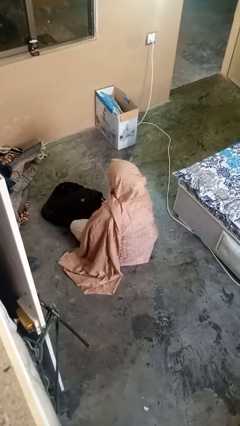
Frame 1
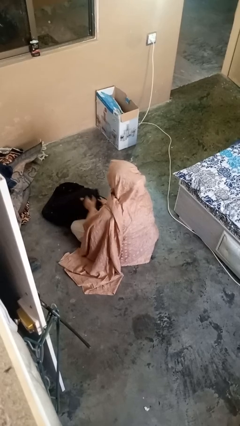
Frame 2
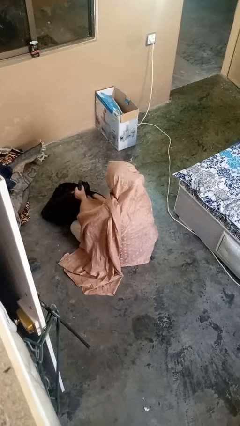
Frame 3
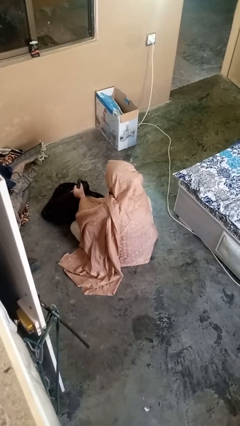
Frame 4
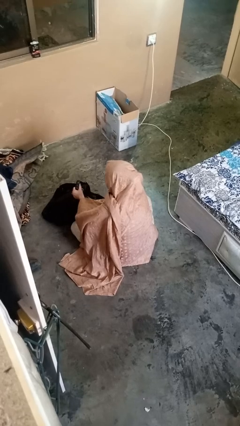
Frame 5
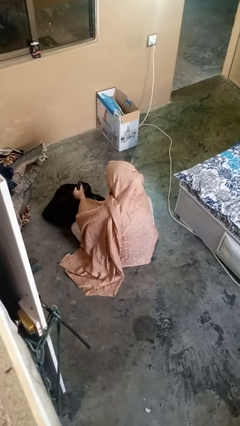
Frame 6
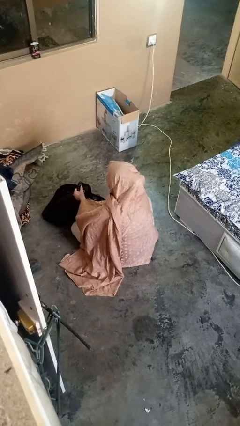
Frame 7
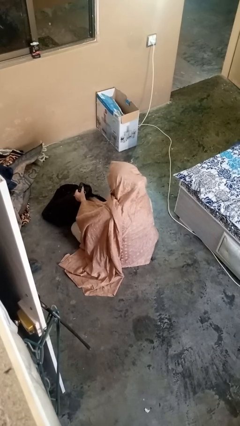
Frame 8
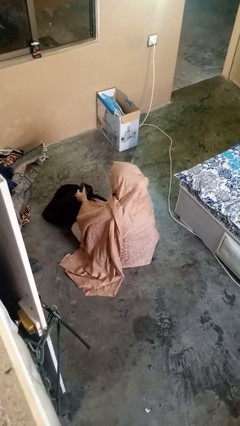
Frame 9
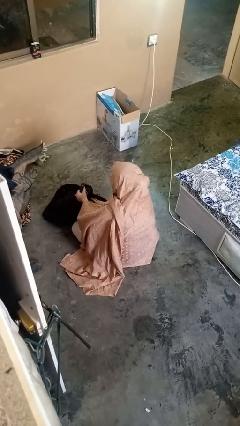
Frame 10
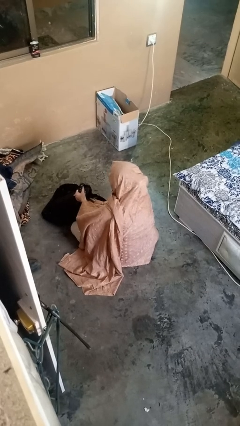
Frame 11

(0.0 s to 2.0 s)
person searches in backpack

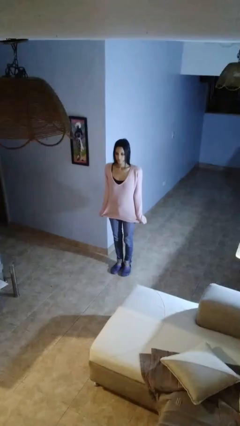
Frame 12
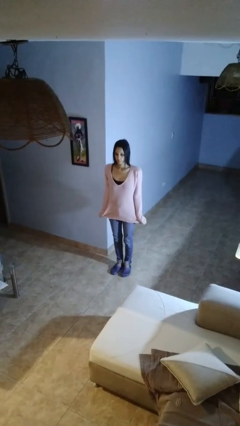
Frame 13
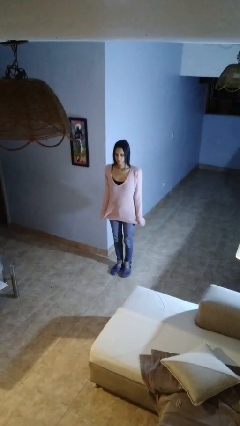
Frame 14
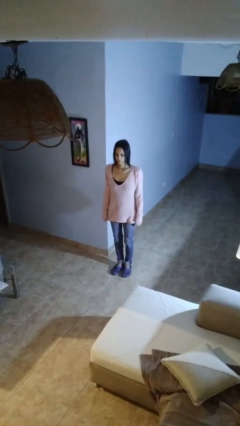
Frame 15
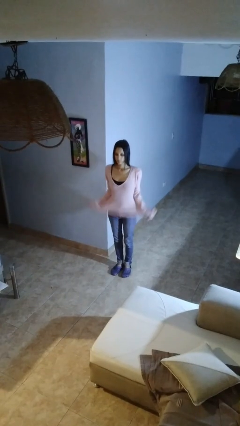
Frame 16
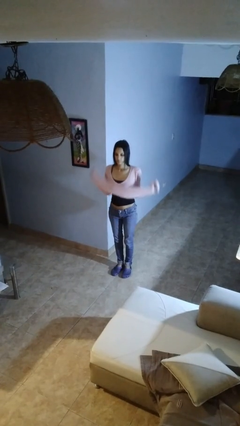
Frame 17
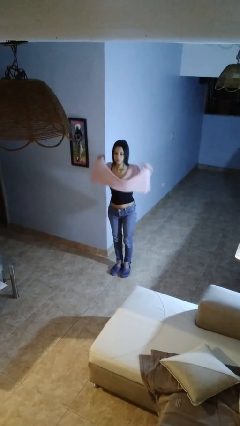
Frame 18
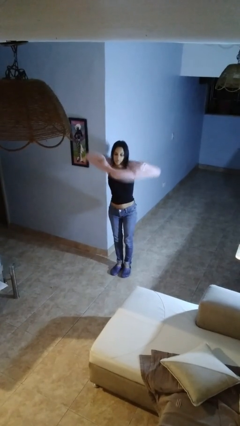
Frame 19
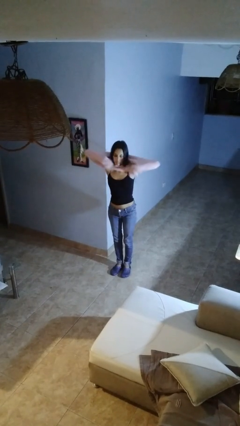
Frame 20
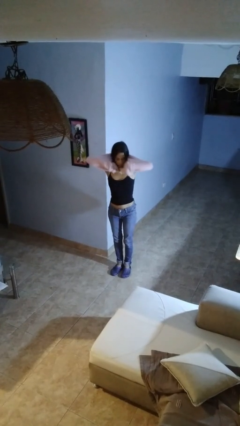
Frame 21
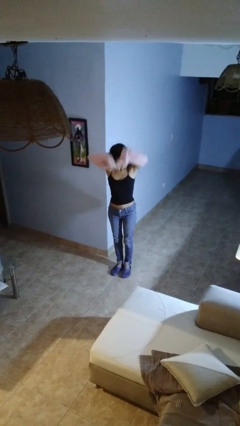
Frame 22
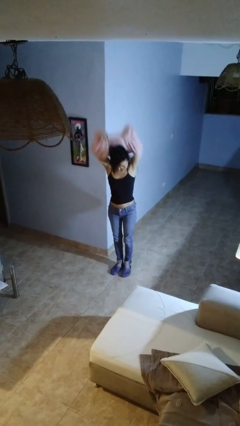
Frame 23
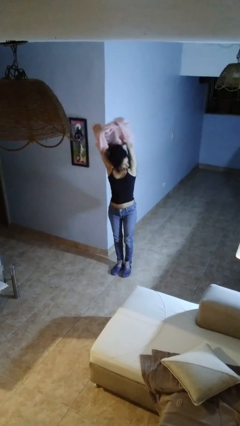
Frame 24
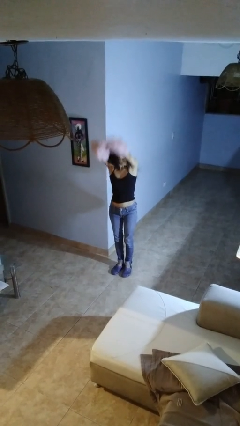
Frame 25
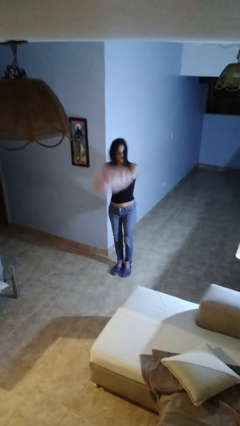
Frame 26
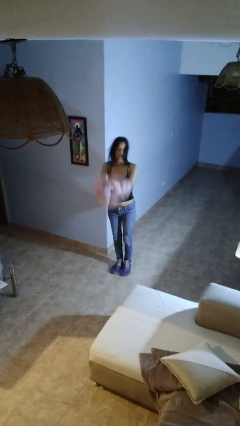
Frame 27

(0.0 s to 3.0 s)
person takes off shirt

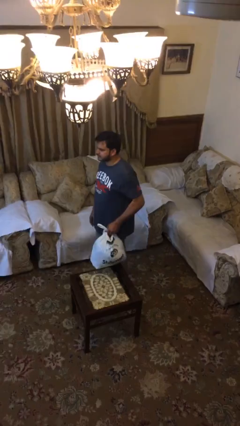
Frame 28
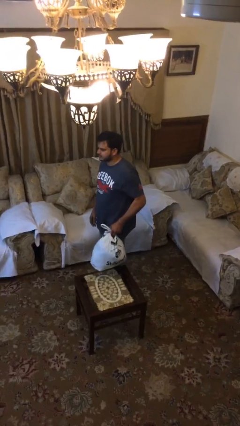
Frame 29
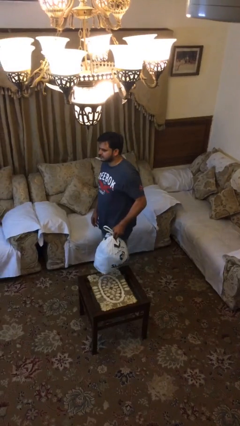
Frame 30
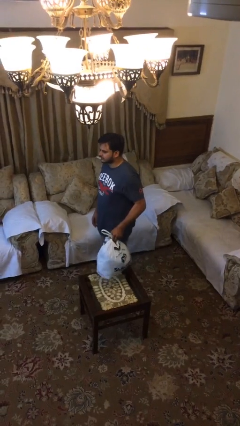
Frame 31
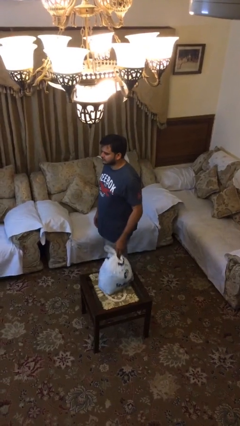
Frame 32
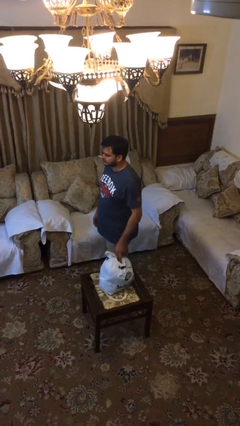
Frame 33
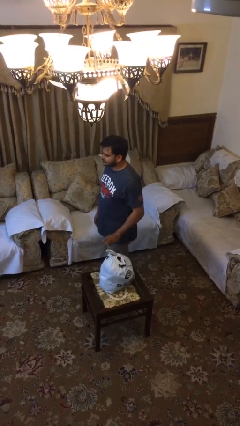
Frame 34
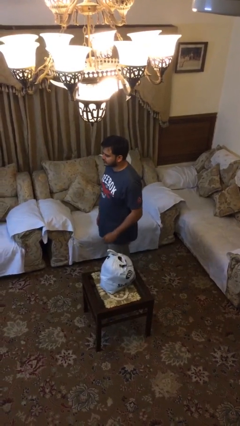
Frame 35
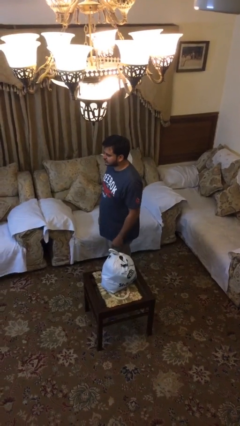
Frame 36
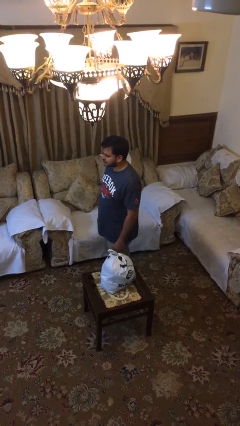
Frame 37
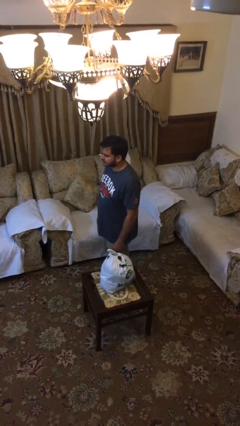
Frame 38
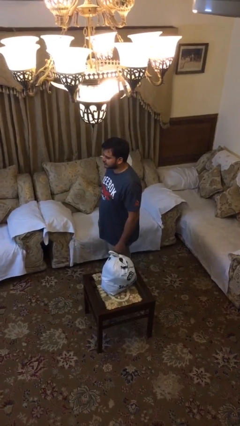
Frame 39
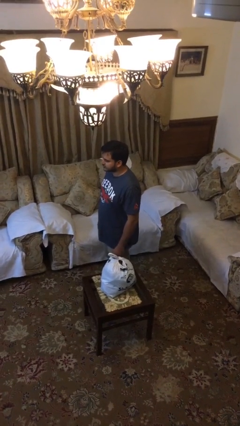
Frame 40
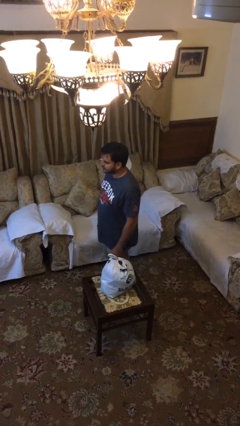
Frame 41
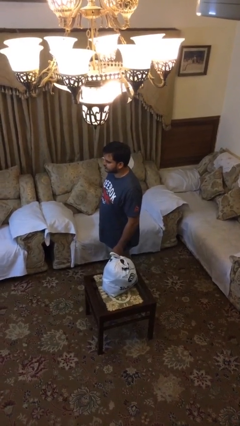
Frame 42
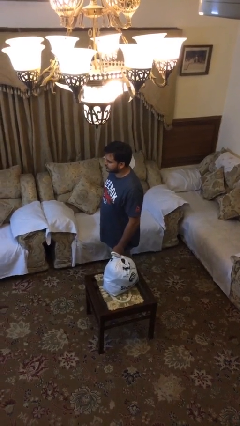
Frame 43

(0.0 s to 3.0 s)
person puts down object on table

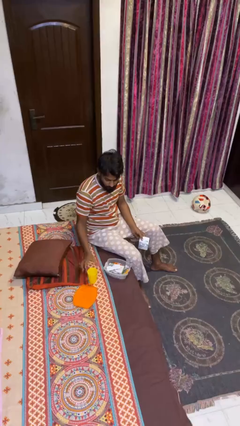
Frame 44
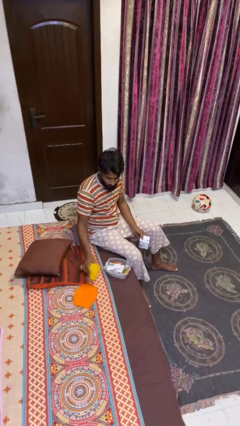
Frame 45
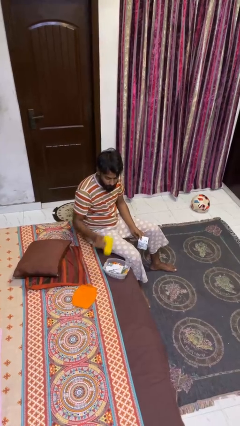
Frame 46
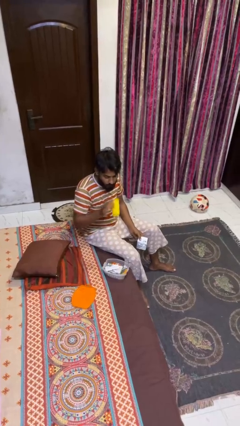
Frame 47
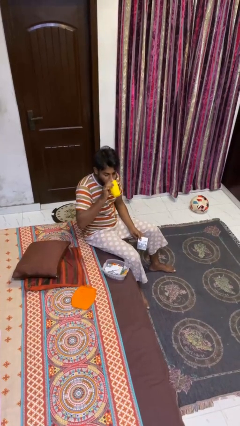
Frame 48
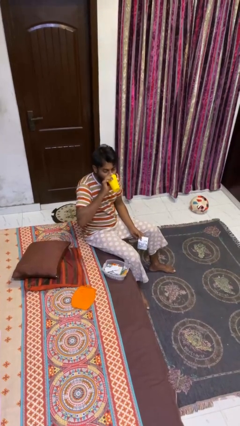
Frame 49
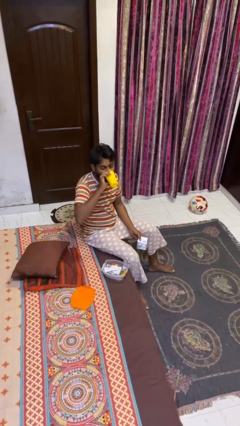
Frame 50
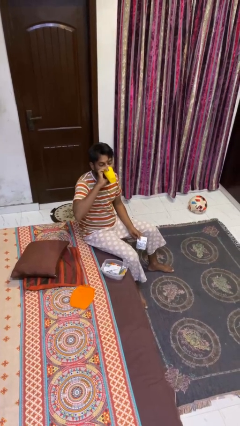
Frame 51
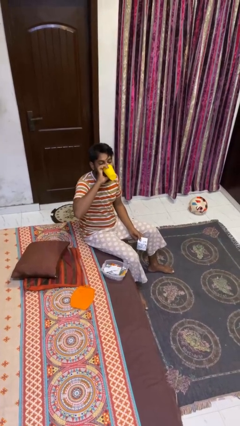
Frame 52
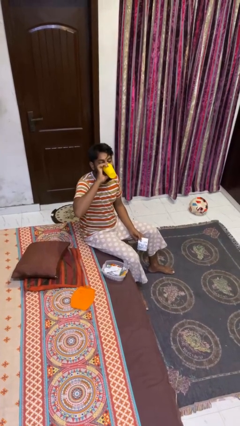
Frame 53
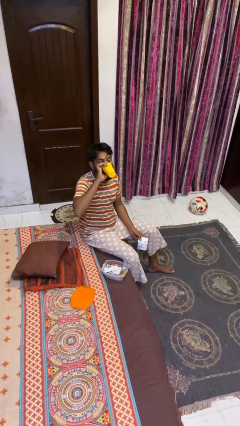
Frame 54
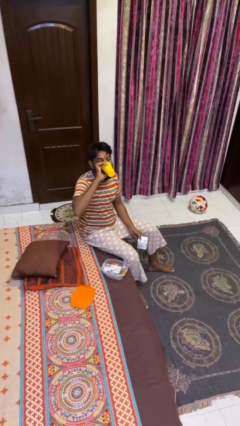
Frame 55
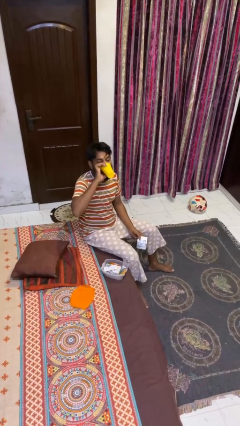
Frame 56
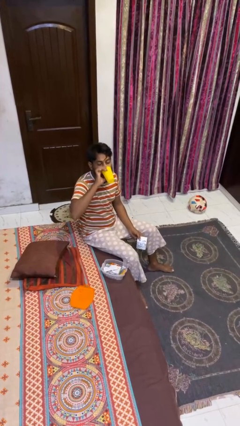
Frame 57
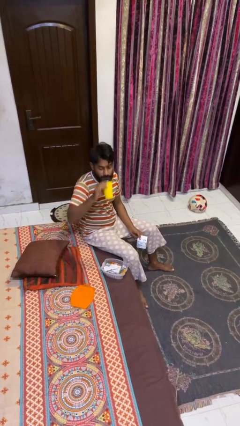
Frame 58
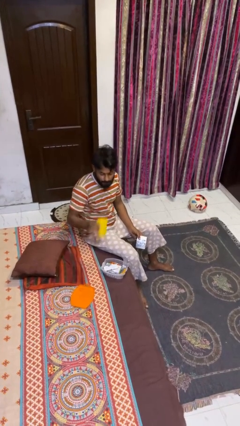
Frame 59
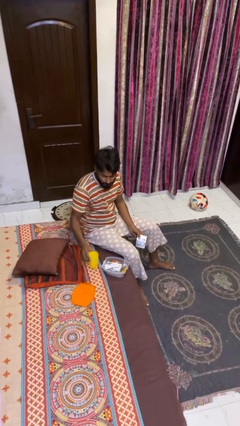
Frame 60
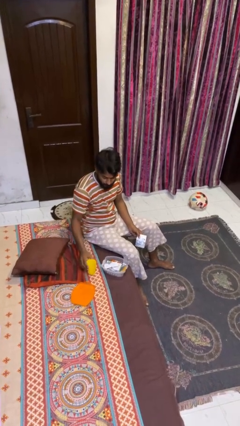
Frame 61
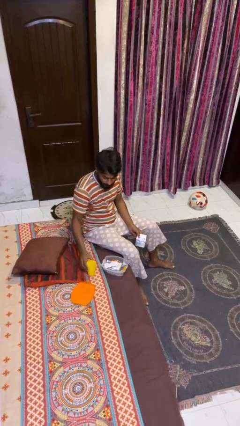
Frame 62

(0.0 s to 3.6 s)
person drinks from cup

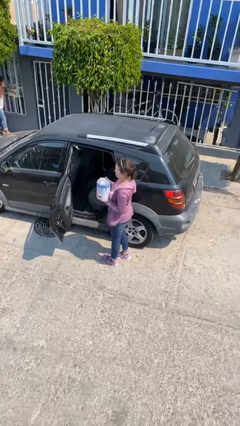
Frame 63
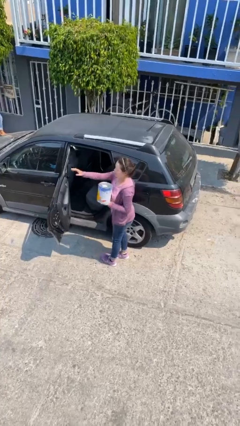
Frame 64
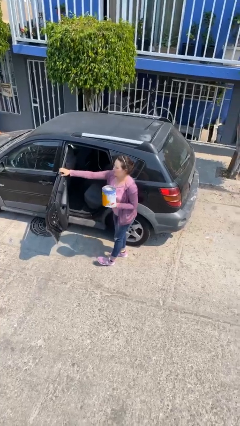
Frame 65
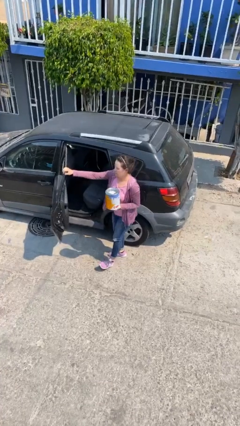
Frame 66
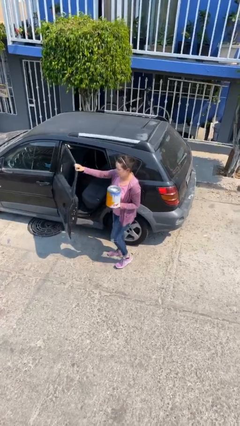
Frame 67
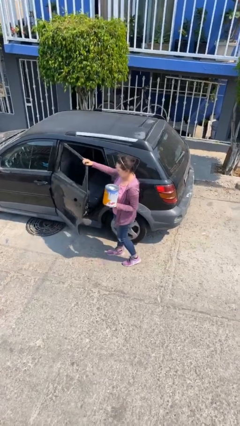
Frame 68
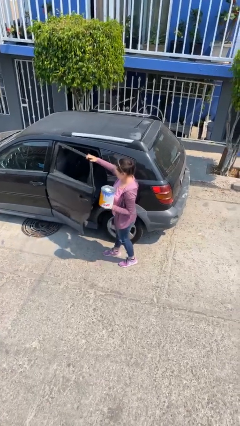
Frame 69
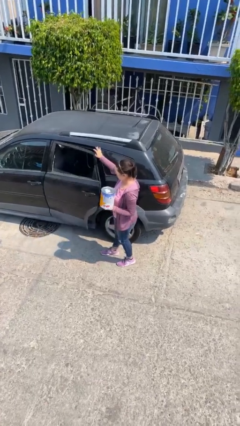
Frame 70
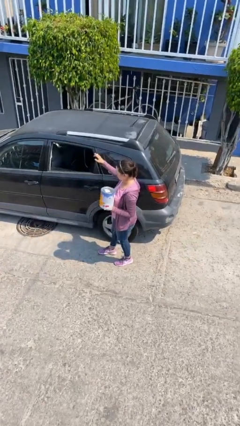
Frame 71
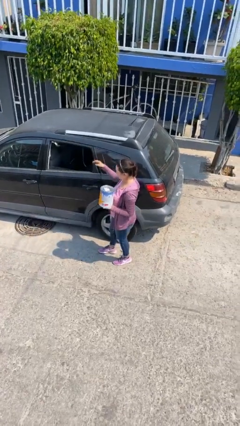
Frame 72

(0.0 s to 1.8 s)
person closes car door

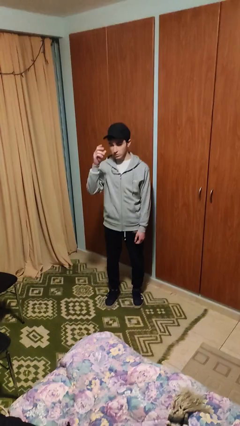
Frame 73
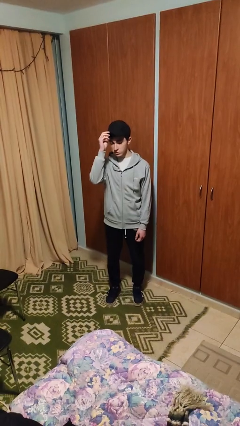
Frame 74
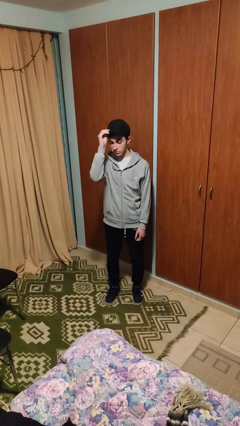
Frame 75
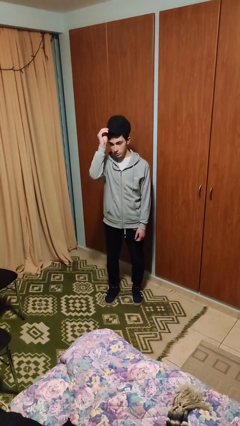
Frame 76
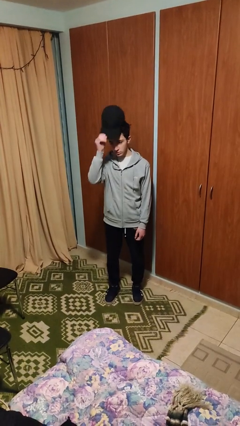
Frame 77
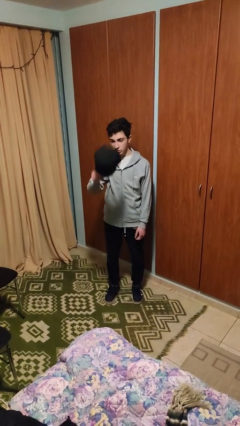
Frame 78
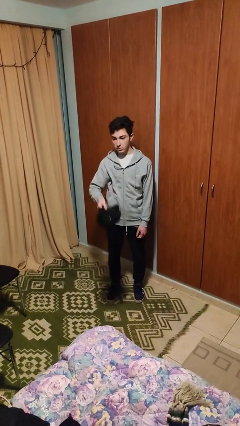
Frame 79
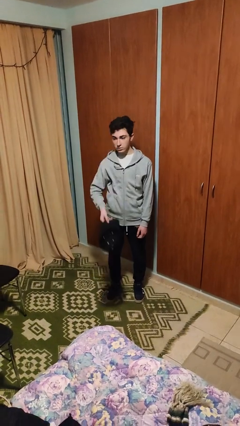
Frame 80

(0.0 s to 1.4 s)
person takes off hat

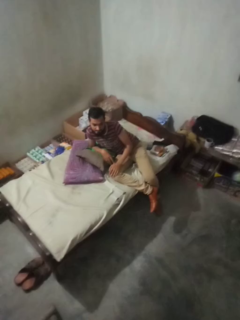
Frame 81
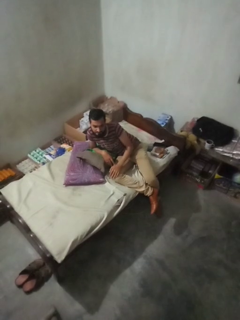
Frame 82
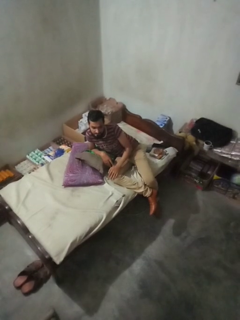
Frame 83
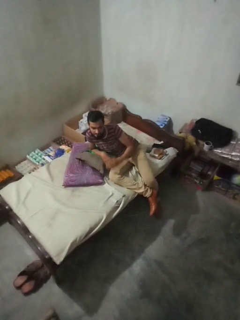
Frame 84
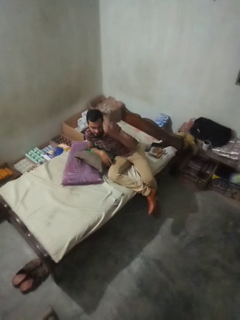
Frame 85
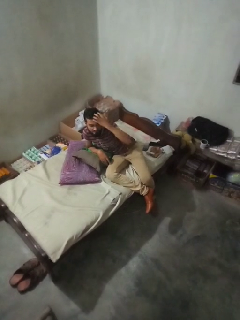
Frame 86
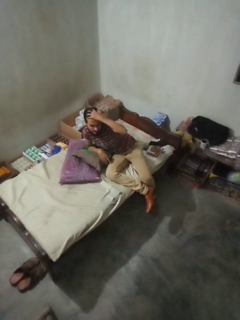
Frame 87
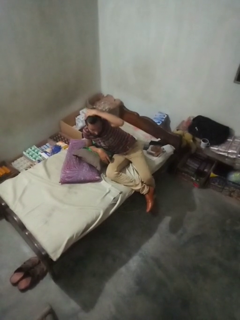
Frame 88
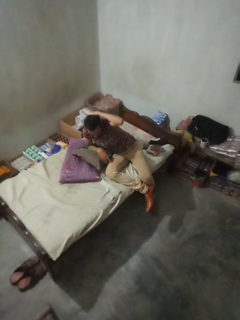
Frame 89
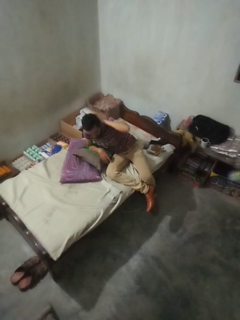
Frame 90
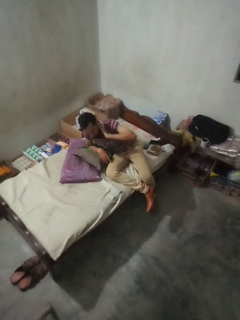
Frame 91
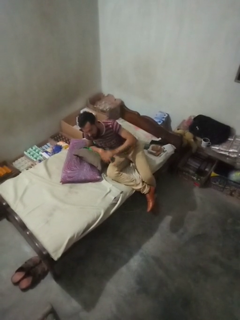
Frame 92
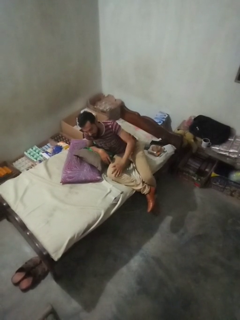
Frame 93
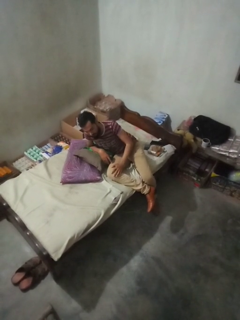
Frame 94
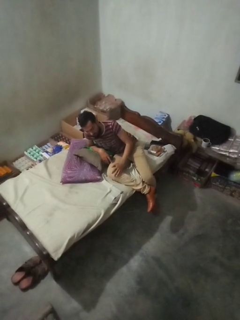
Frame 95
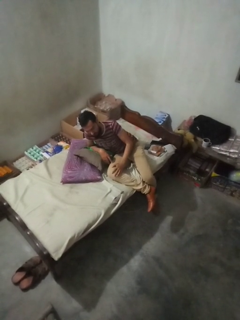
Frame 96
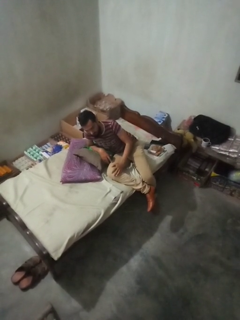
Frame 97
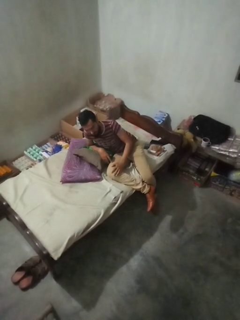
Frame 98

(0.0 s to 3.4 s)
person strokes hair

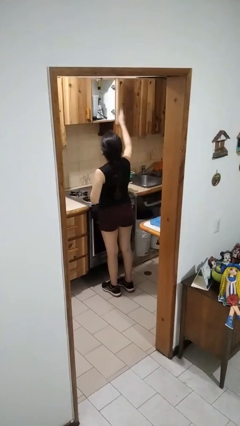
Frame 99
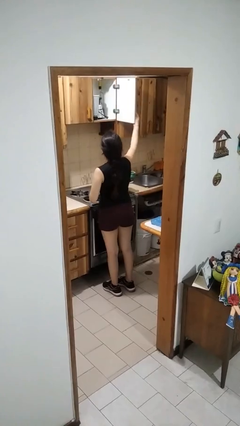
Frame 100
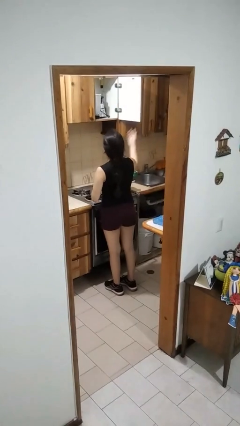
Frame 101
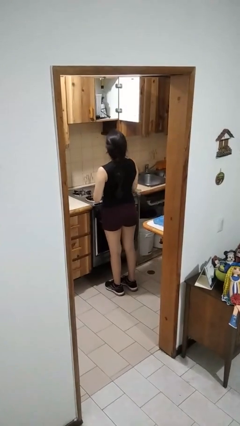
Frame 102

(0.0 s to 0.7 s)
person opens cabinet
